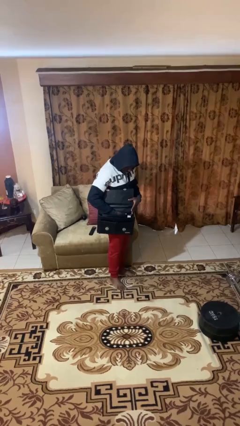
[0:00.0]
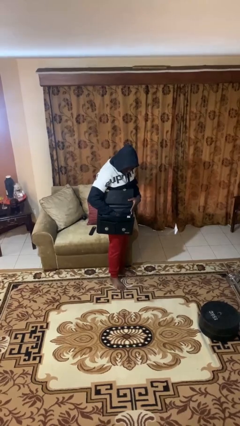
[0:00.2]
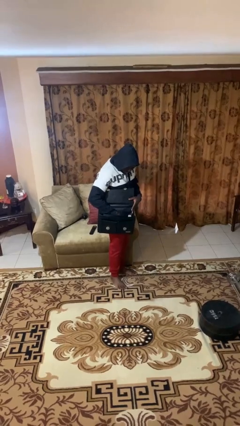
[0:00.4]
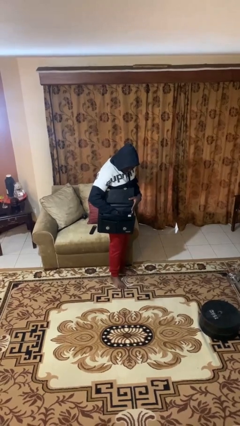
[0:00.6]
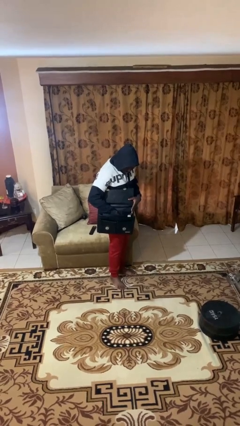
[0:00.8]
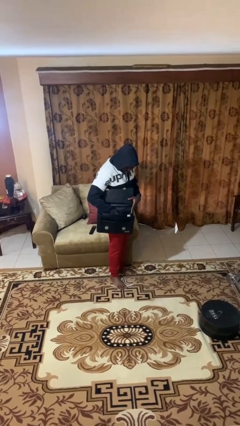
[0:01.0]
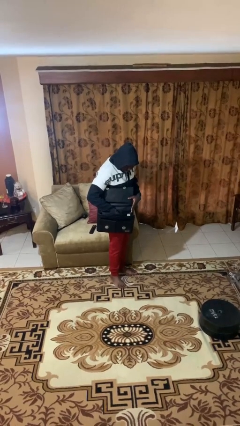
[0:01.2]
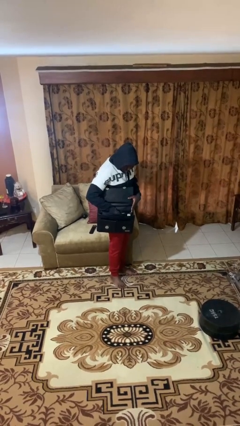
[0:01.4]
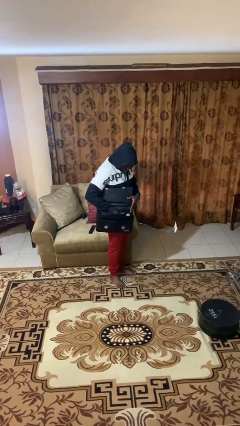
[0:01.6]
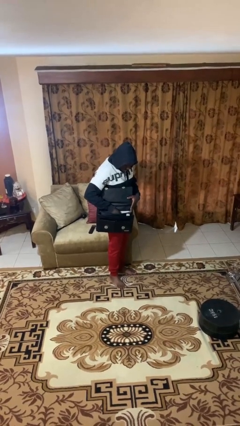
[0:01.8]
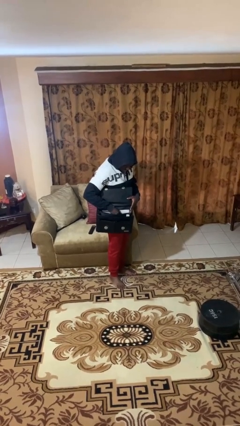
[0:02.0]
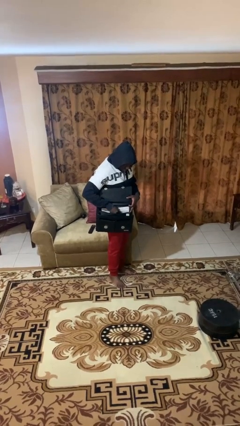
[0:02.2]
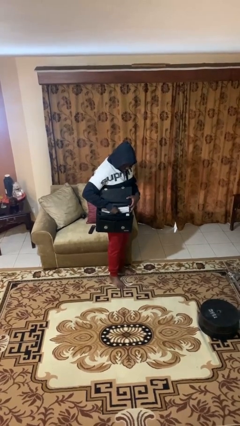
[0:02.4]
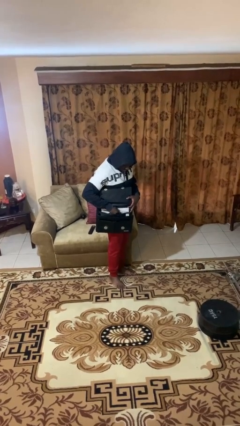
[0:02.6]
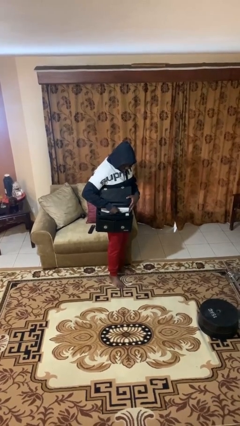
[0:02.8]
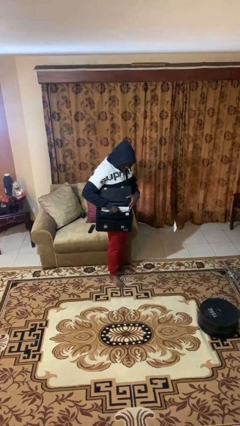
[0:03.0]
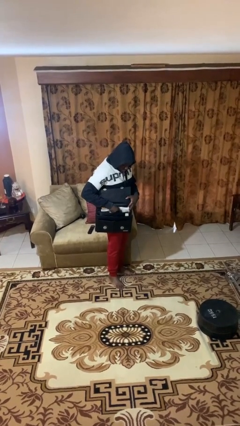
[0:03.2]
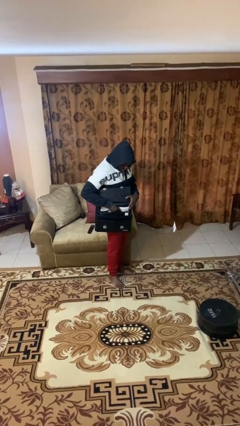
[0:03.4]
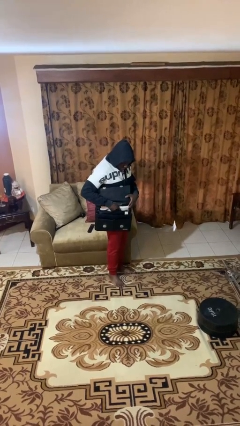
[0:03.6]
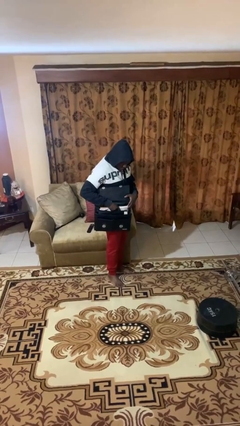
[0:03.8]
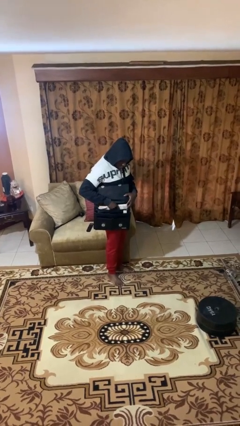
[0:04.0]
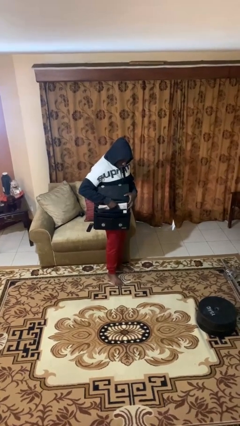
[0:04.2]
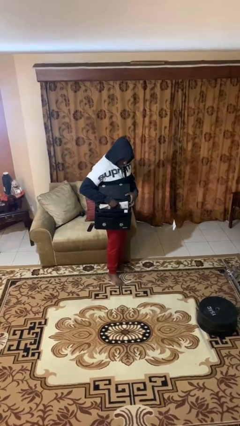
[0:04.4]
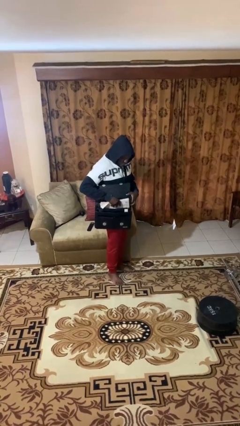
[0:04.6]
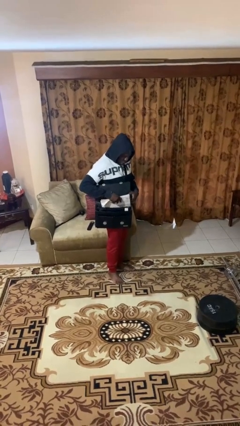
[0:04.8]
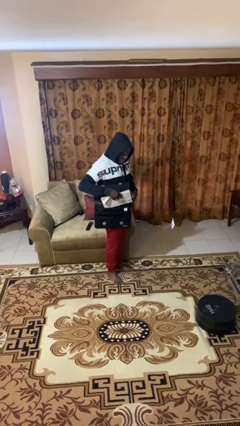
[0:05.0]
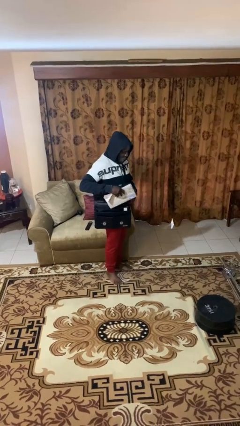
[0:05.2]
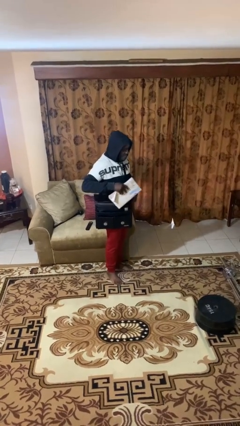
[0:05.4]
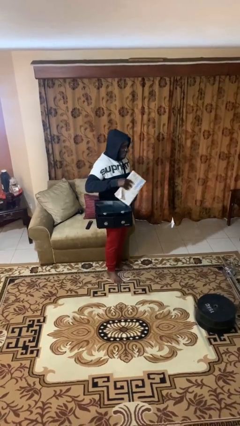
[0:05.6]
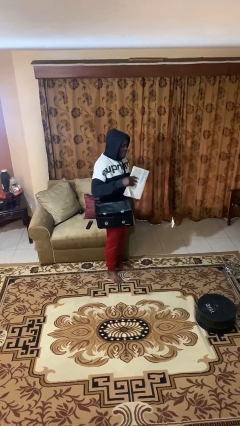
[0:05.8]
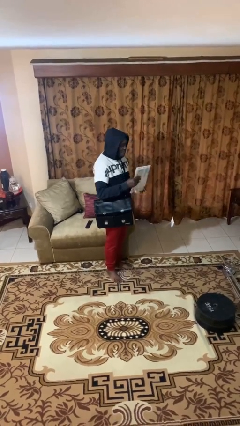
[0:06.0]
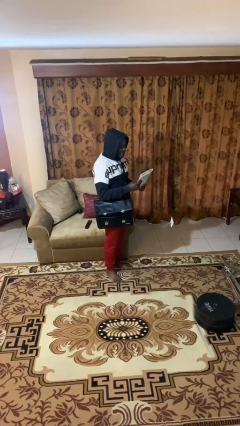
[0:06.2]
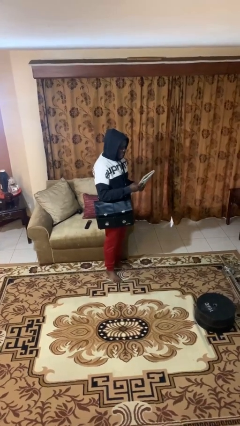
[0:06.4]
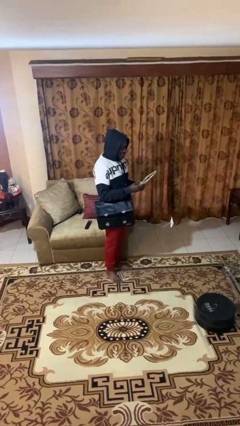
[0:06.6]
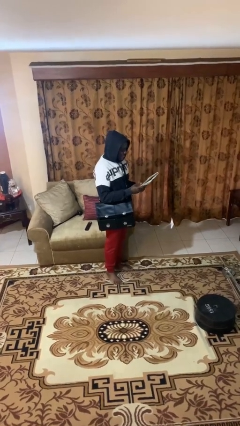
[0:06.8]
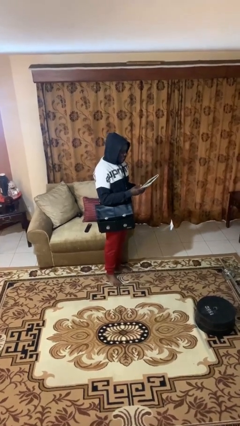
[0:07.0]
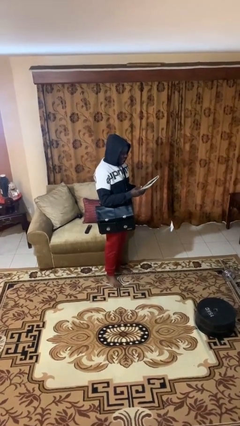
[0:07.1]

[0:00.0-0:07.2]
person takes object from purse

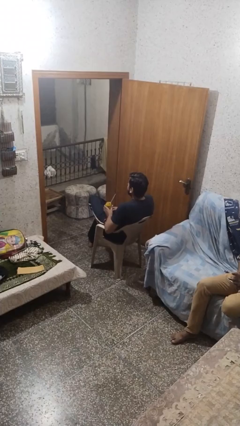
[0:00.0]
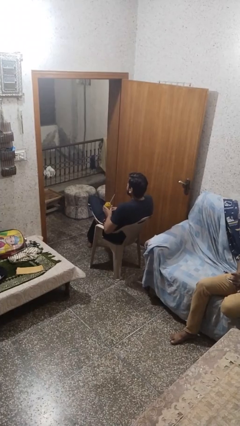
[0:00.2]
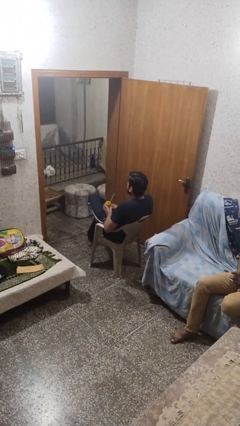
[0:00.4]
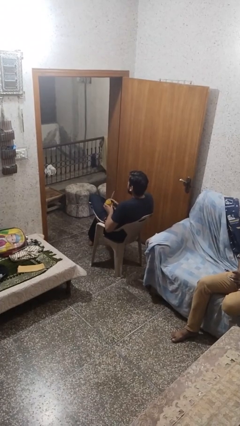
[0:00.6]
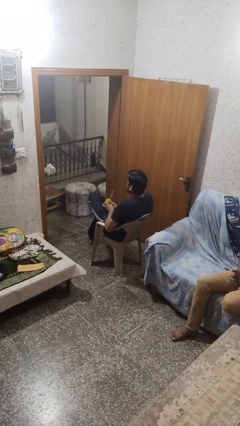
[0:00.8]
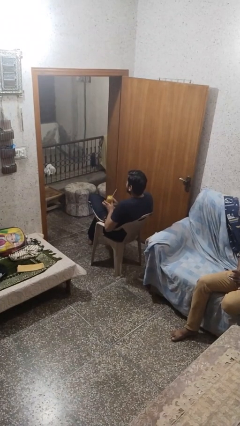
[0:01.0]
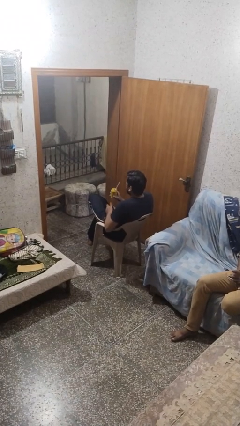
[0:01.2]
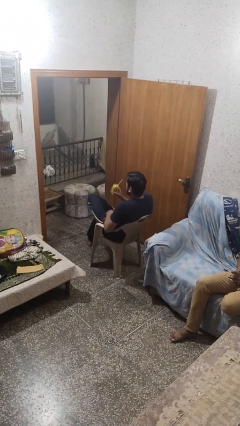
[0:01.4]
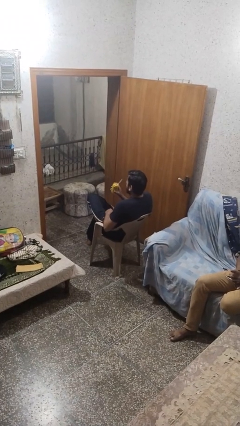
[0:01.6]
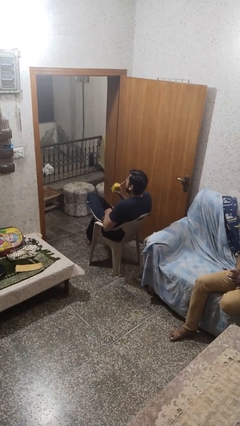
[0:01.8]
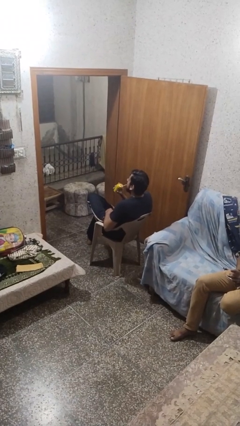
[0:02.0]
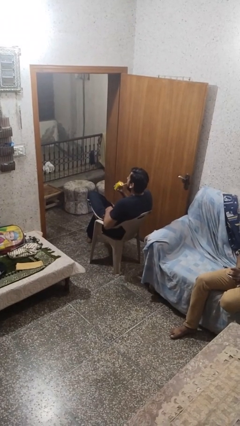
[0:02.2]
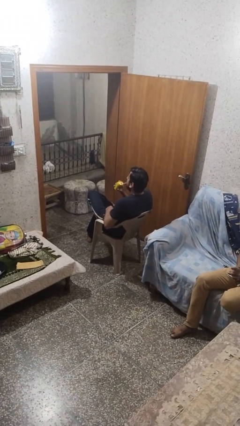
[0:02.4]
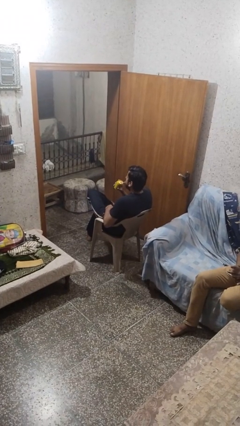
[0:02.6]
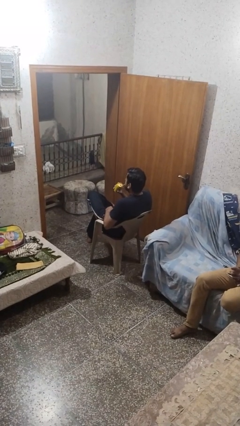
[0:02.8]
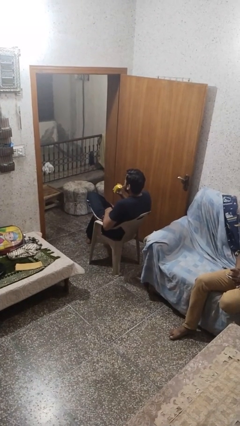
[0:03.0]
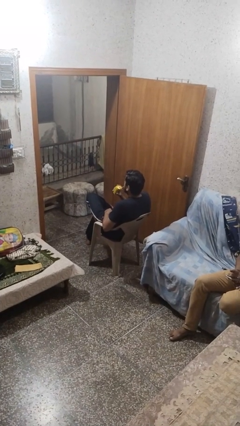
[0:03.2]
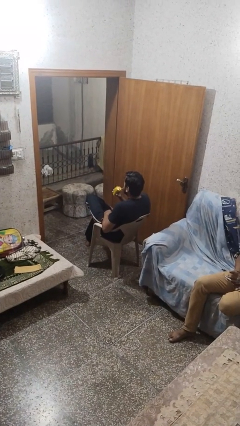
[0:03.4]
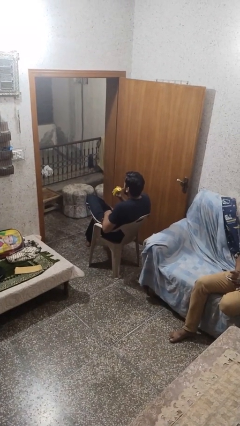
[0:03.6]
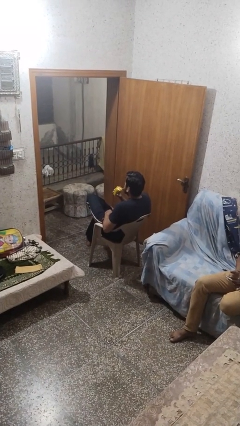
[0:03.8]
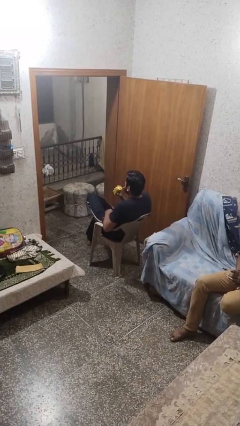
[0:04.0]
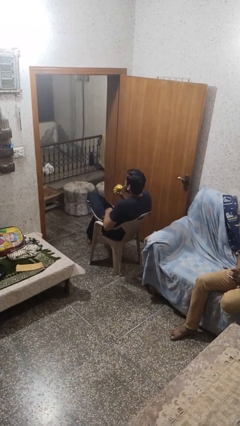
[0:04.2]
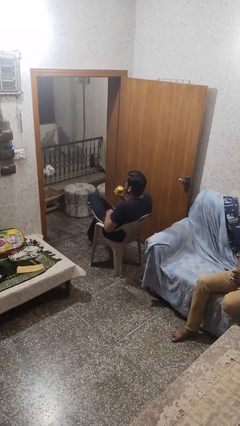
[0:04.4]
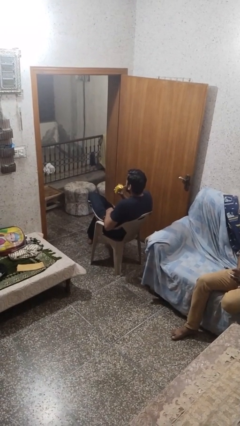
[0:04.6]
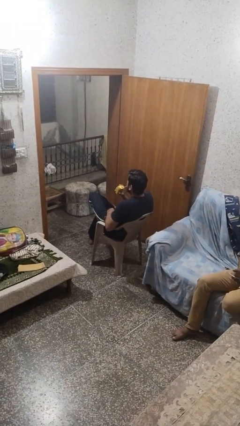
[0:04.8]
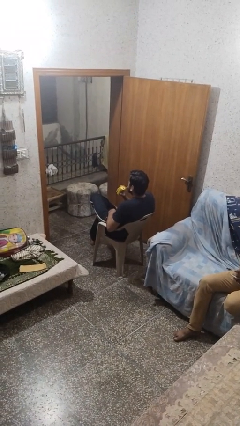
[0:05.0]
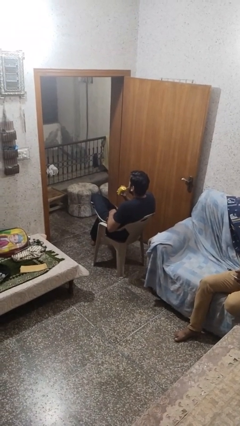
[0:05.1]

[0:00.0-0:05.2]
person drinks from straw

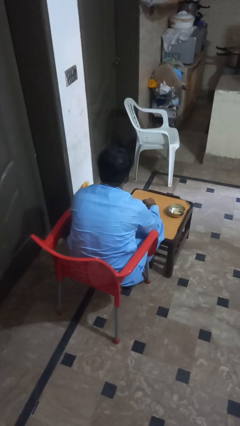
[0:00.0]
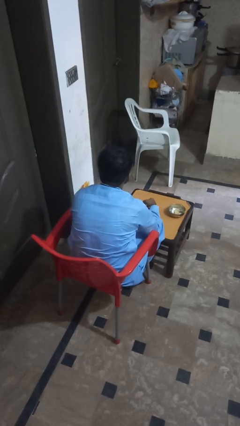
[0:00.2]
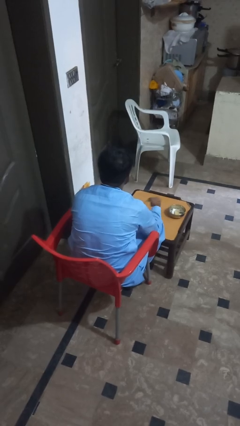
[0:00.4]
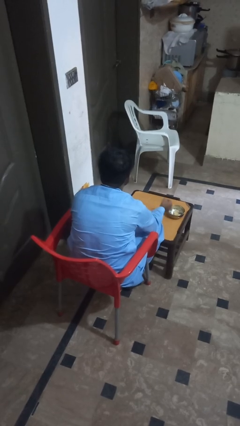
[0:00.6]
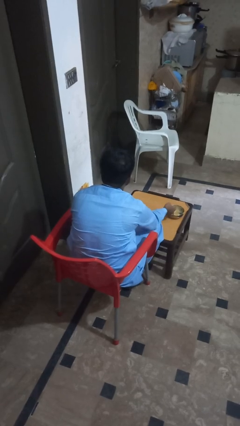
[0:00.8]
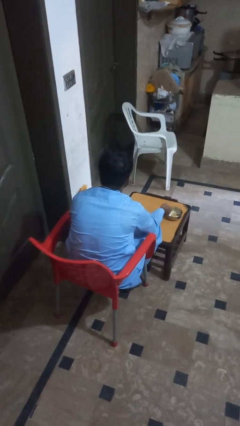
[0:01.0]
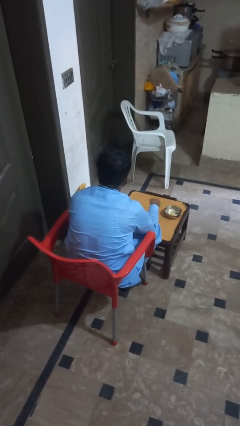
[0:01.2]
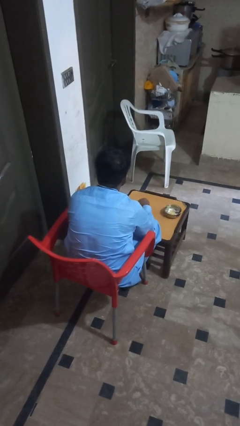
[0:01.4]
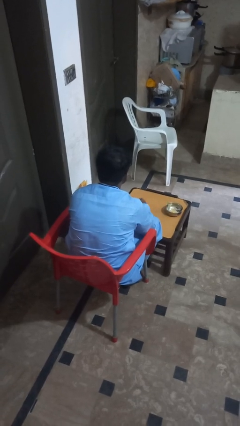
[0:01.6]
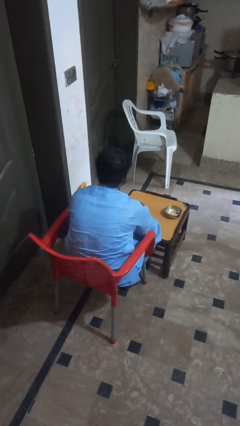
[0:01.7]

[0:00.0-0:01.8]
person pours into bowl

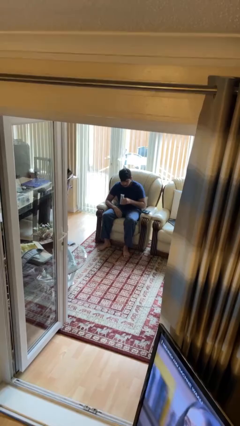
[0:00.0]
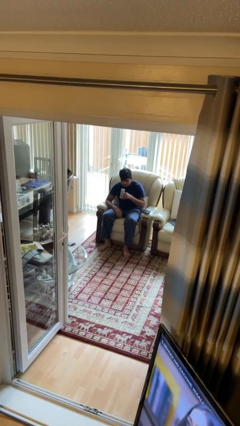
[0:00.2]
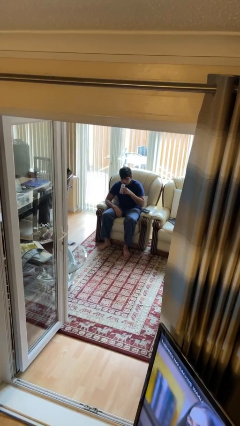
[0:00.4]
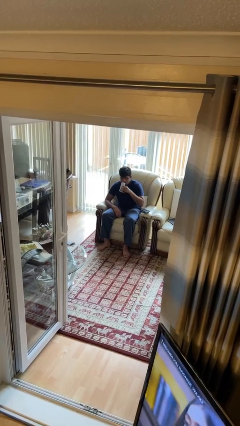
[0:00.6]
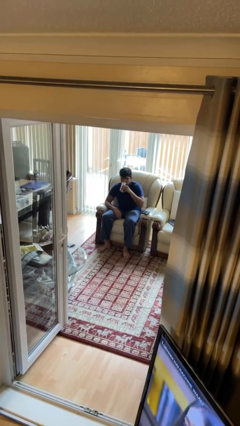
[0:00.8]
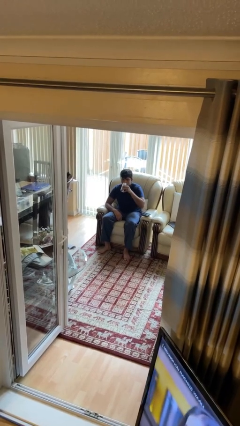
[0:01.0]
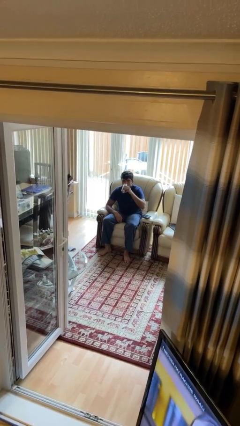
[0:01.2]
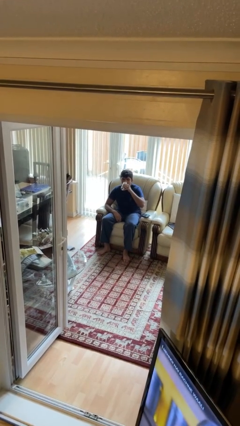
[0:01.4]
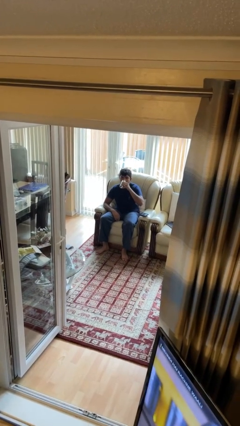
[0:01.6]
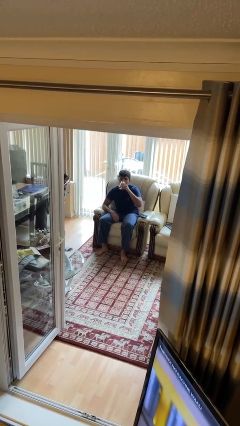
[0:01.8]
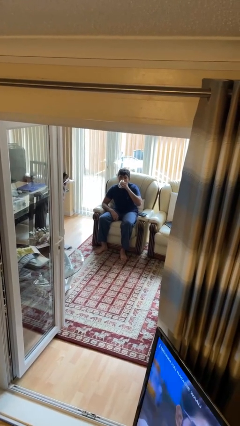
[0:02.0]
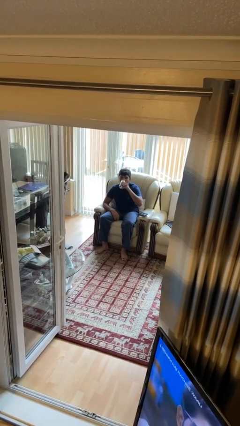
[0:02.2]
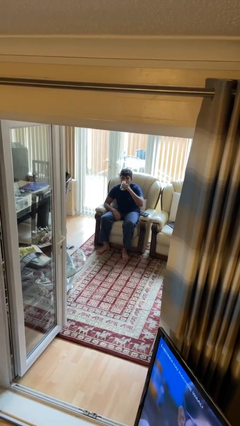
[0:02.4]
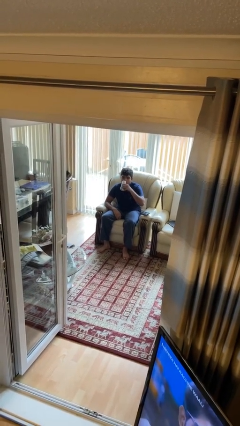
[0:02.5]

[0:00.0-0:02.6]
person drinks from beverage can

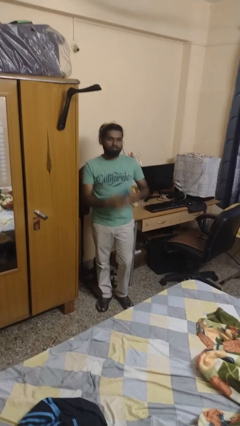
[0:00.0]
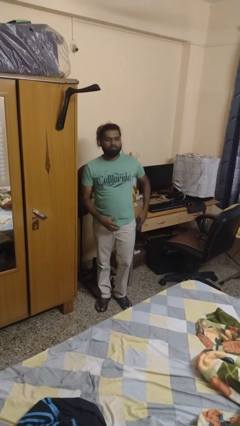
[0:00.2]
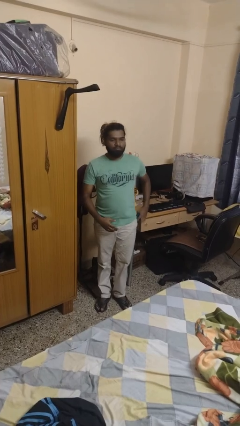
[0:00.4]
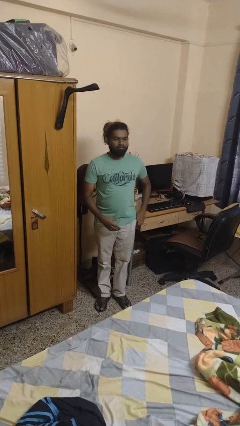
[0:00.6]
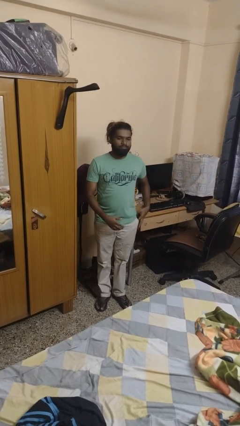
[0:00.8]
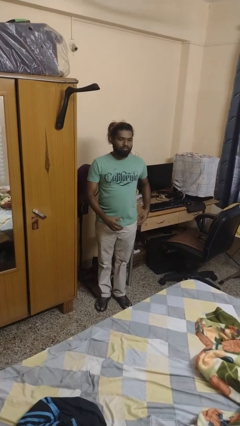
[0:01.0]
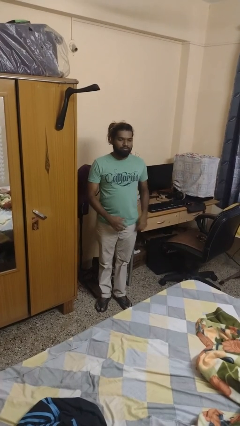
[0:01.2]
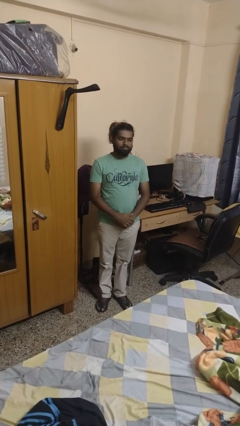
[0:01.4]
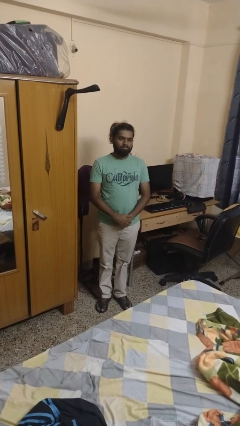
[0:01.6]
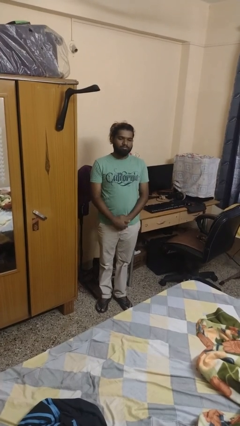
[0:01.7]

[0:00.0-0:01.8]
person puts phone into pocket
